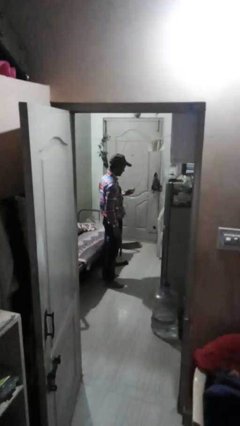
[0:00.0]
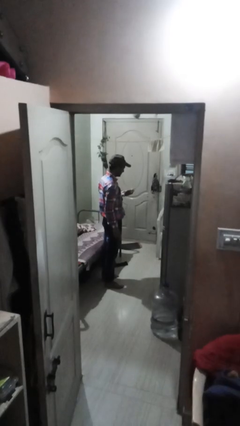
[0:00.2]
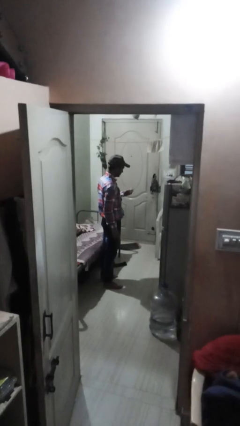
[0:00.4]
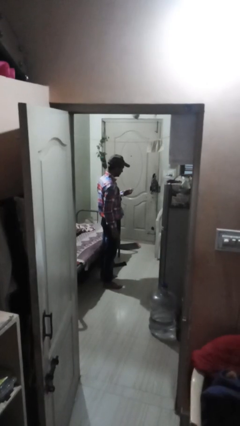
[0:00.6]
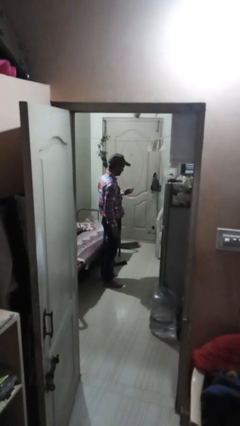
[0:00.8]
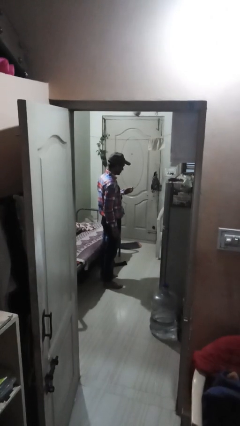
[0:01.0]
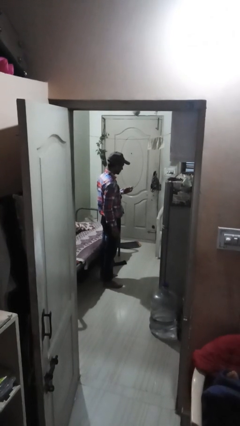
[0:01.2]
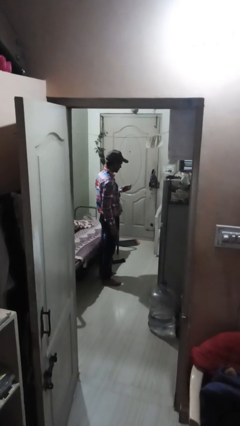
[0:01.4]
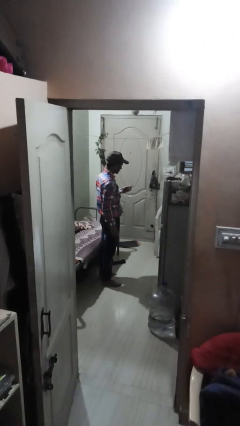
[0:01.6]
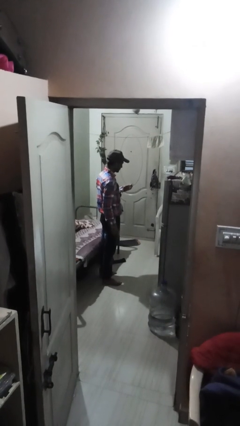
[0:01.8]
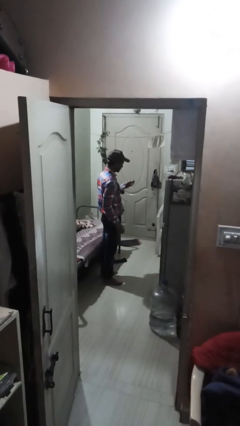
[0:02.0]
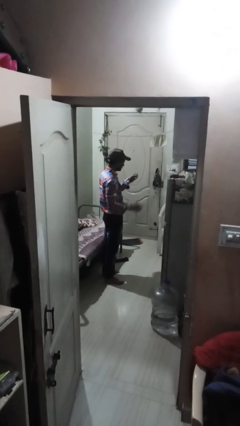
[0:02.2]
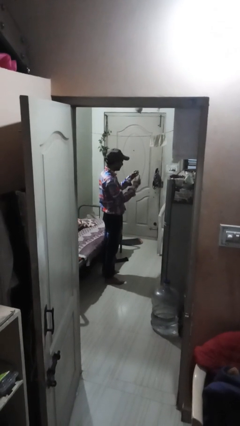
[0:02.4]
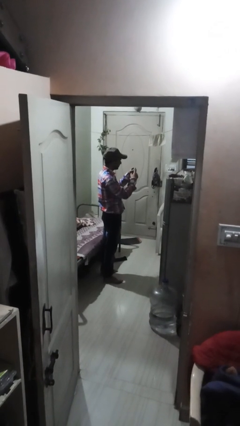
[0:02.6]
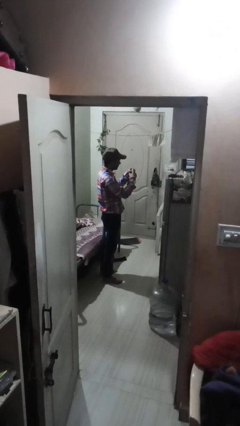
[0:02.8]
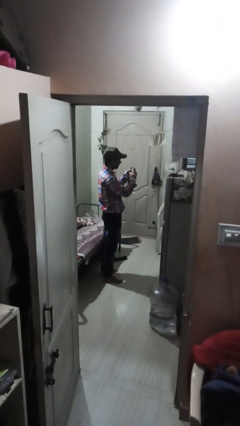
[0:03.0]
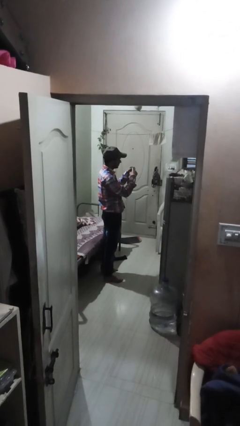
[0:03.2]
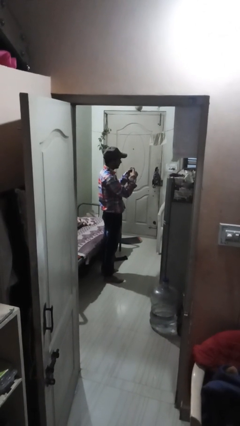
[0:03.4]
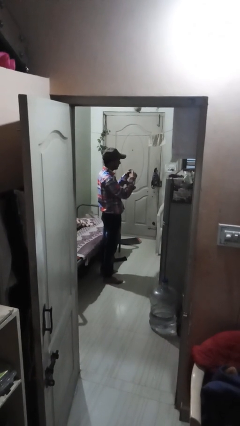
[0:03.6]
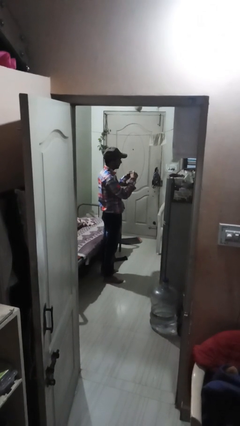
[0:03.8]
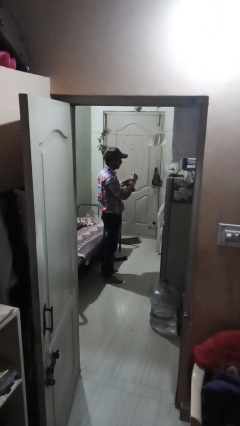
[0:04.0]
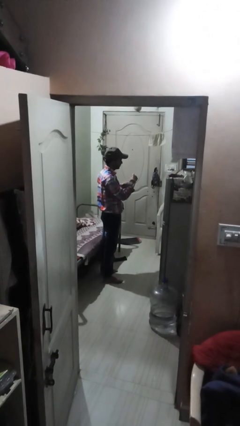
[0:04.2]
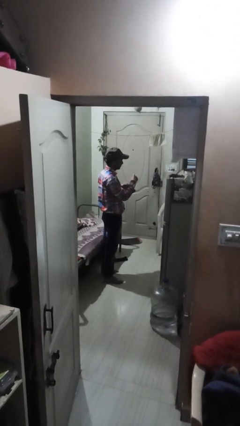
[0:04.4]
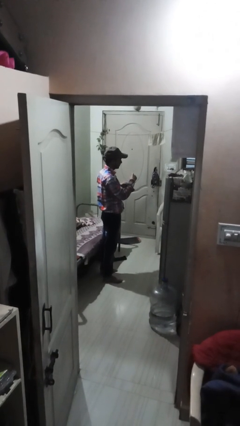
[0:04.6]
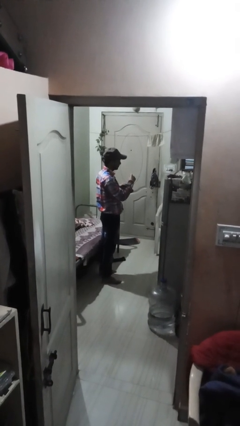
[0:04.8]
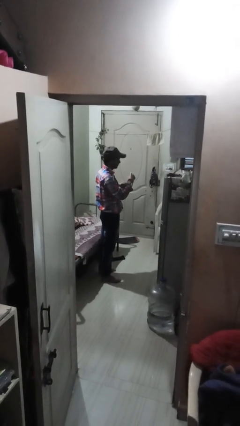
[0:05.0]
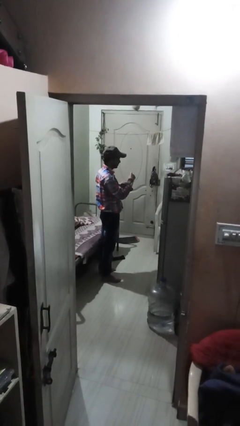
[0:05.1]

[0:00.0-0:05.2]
person puts on ring

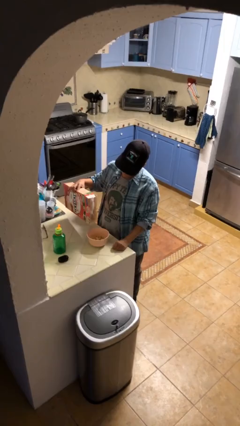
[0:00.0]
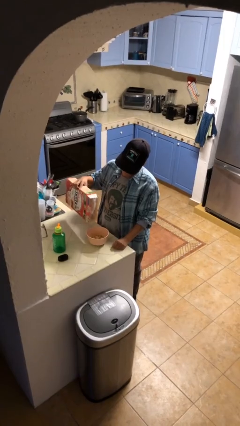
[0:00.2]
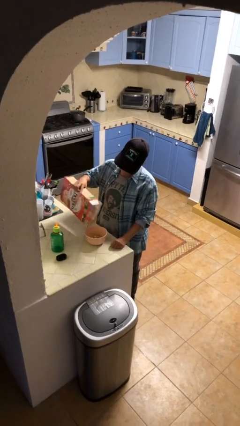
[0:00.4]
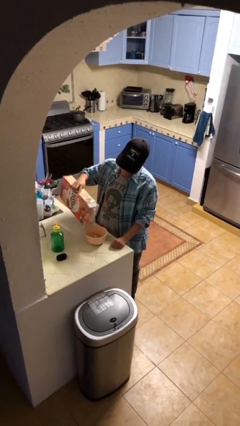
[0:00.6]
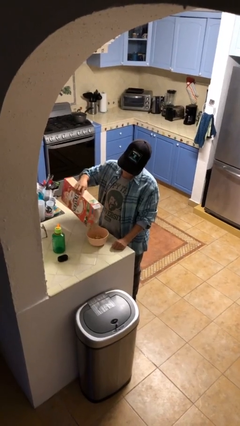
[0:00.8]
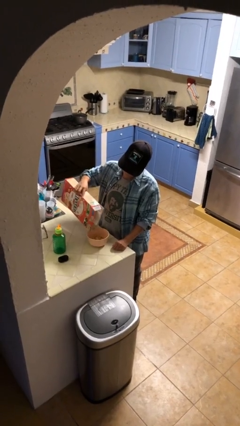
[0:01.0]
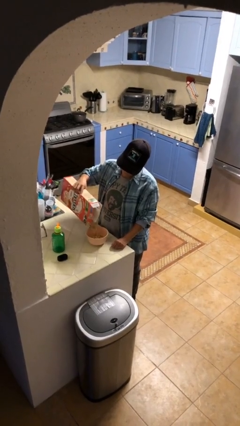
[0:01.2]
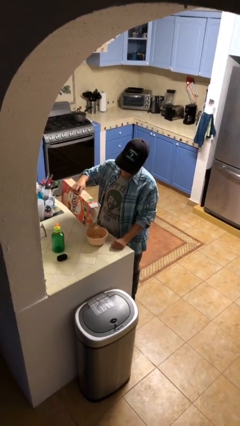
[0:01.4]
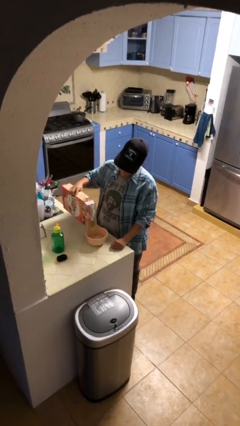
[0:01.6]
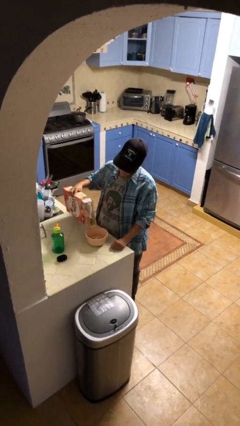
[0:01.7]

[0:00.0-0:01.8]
person pours into bowl

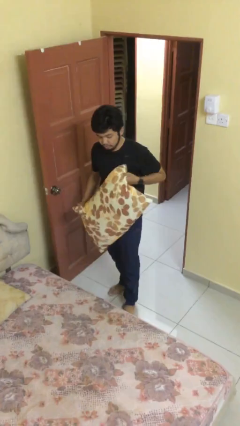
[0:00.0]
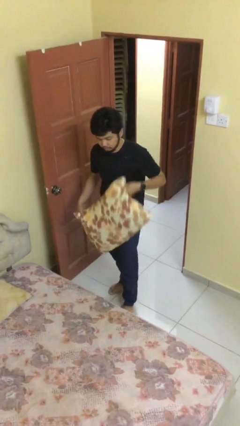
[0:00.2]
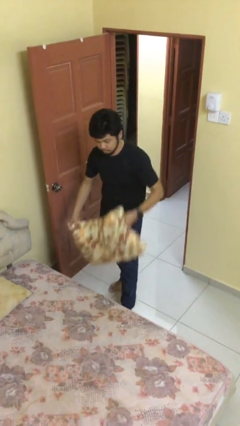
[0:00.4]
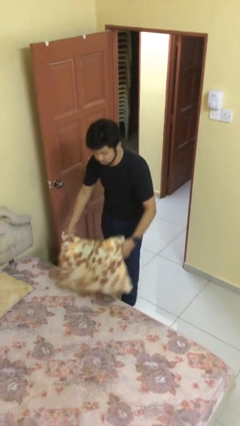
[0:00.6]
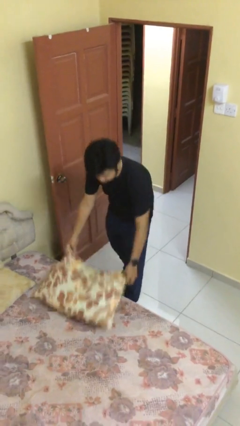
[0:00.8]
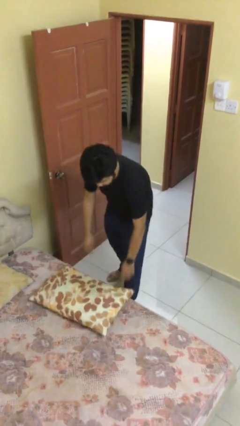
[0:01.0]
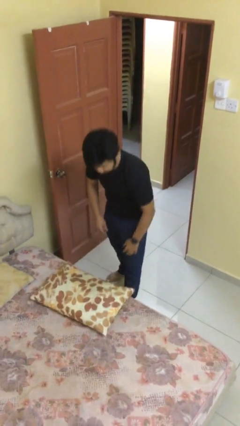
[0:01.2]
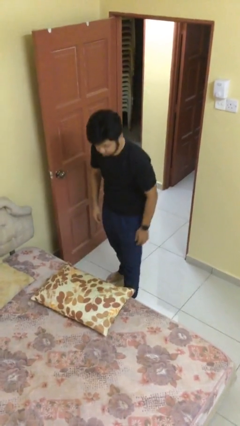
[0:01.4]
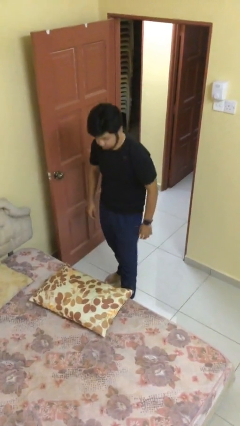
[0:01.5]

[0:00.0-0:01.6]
person puts down object on bed

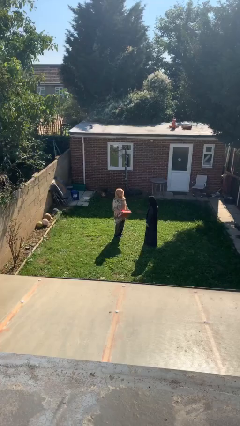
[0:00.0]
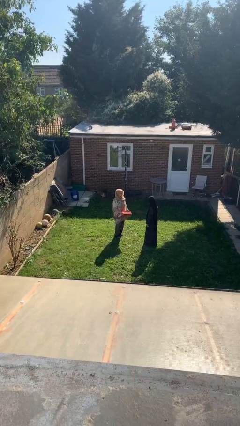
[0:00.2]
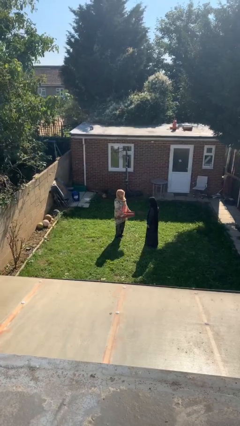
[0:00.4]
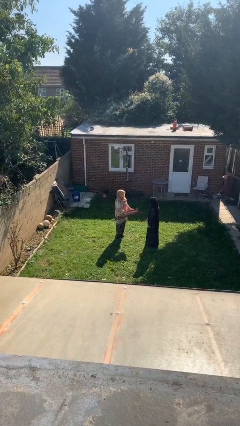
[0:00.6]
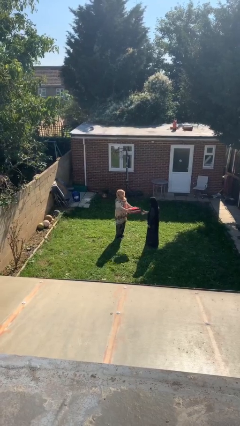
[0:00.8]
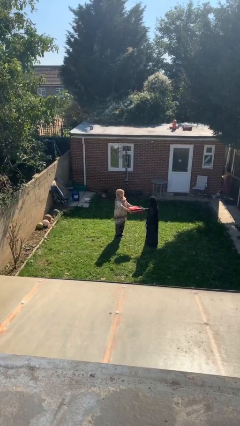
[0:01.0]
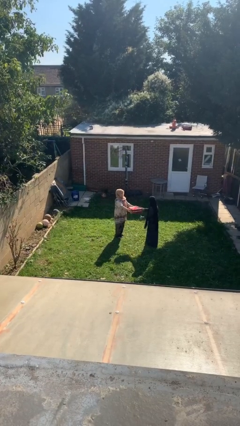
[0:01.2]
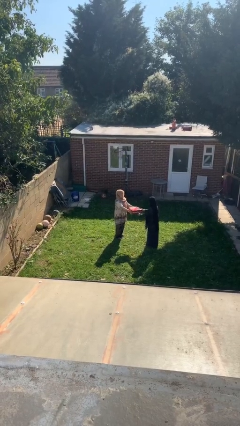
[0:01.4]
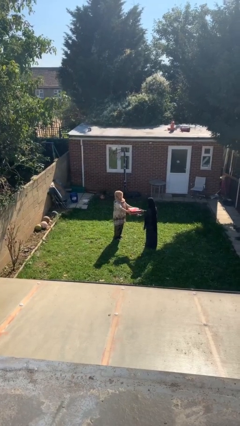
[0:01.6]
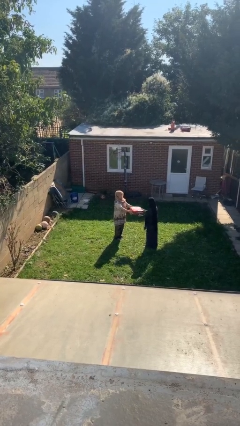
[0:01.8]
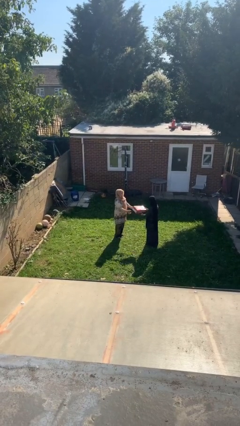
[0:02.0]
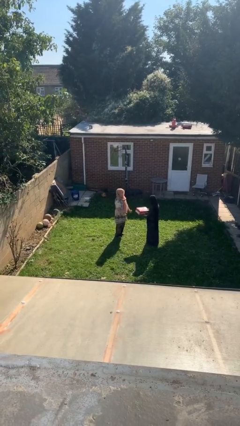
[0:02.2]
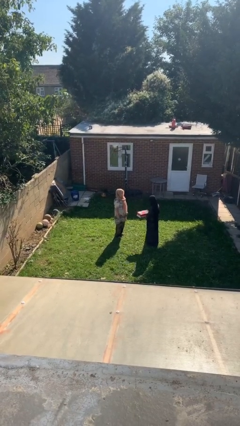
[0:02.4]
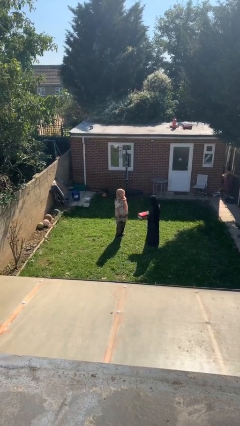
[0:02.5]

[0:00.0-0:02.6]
person transfers object to person

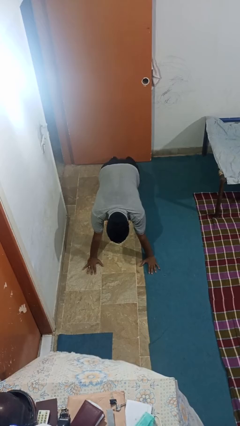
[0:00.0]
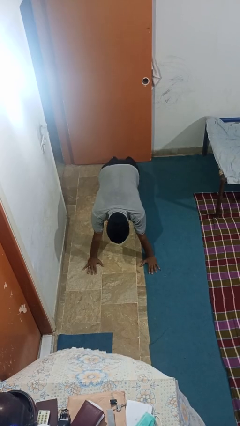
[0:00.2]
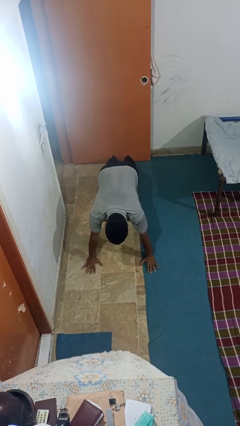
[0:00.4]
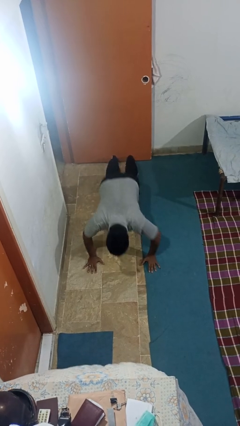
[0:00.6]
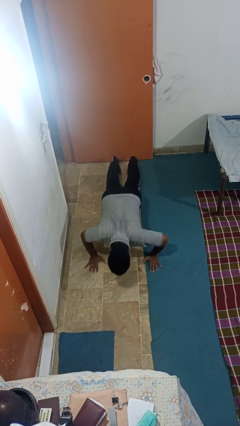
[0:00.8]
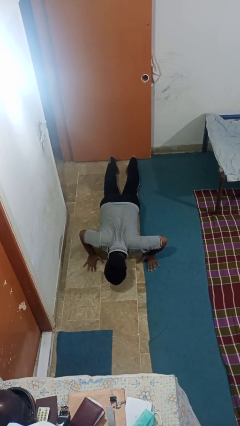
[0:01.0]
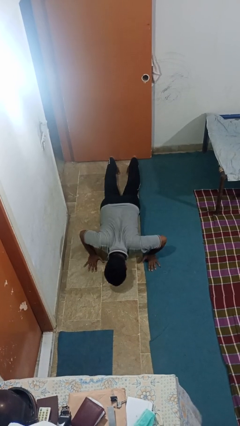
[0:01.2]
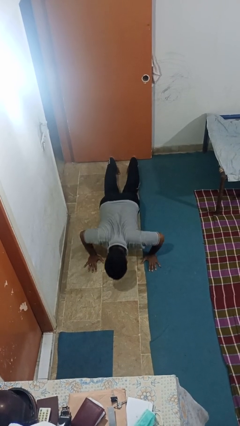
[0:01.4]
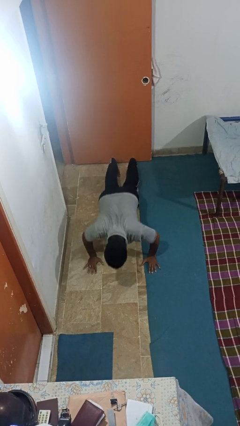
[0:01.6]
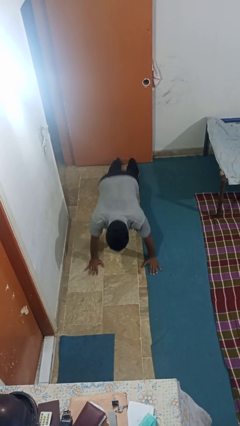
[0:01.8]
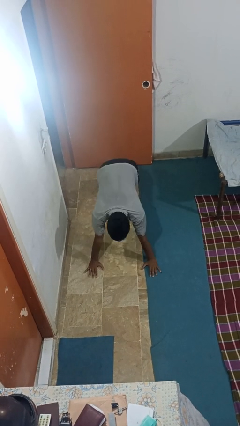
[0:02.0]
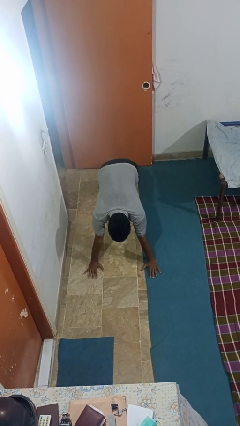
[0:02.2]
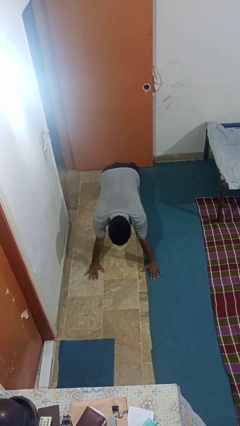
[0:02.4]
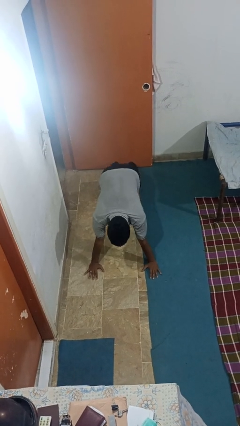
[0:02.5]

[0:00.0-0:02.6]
person exercises with pushup

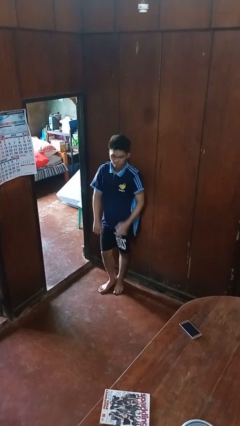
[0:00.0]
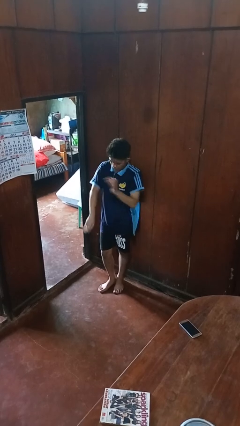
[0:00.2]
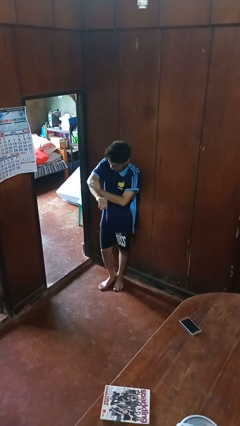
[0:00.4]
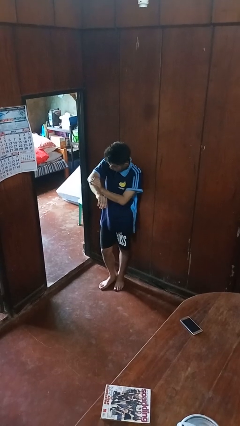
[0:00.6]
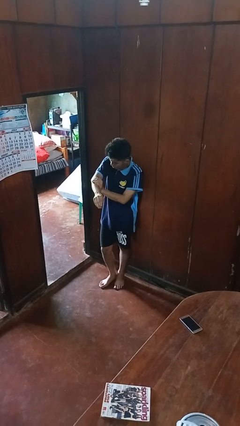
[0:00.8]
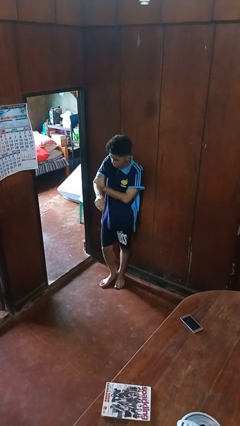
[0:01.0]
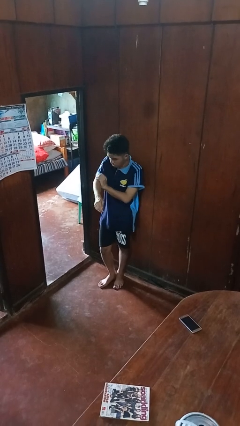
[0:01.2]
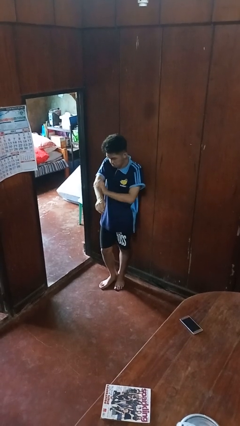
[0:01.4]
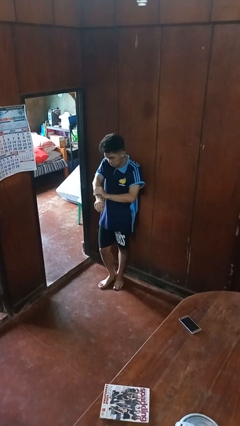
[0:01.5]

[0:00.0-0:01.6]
person swats bug

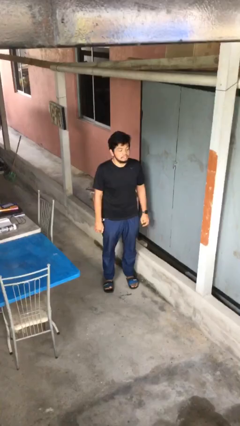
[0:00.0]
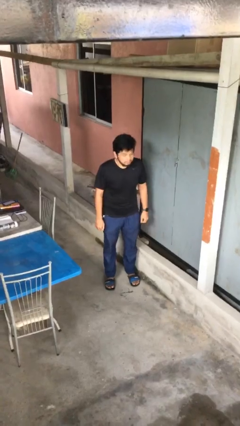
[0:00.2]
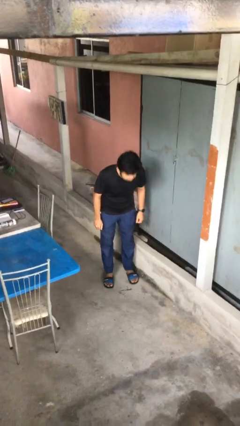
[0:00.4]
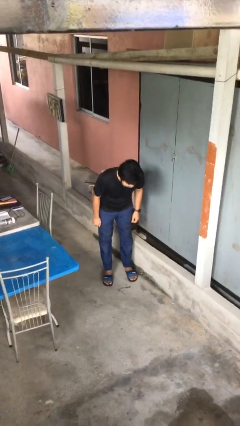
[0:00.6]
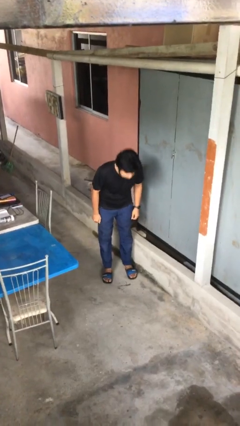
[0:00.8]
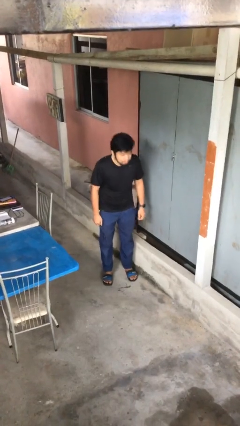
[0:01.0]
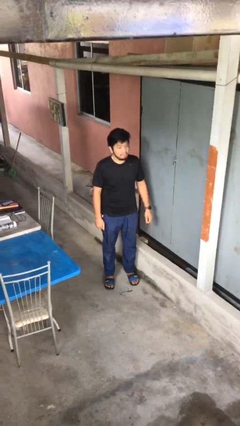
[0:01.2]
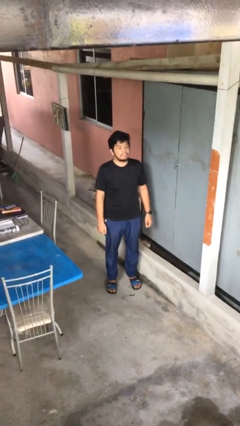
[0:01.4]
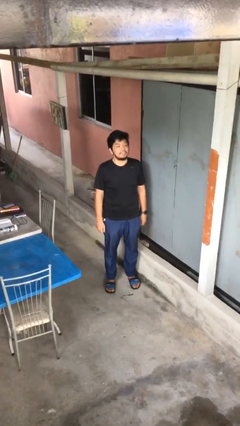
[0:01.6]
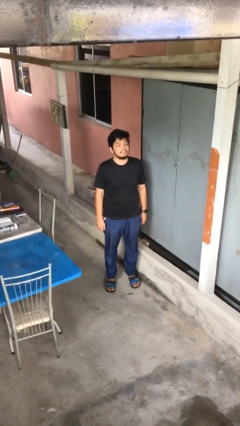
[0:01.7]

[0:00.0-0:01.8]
person bows
